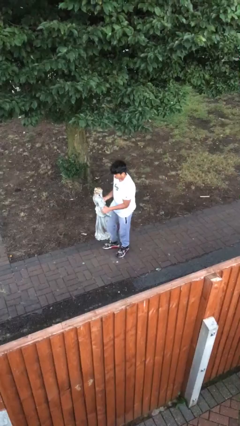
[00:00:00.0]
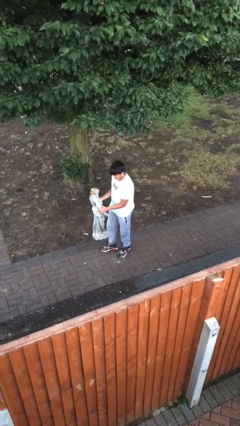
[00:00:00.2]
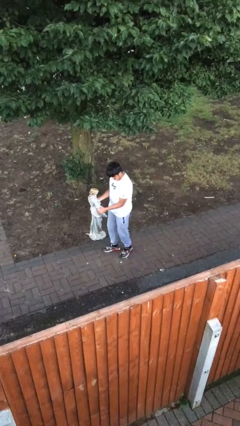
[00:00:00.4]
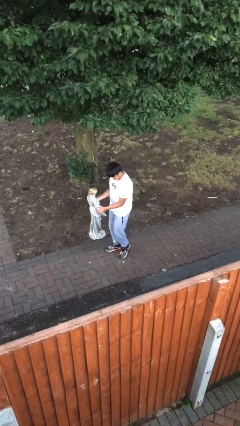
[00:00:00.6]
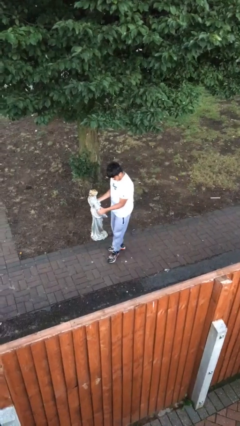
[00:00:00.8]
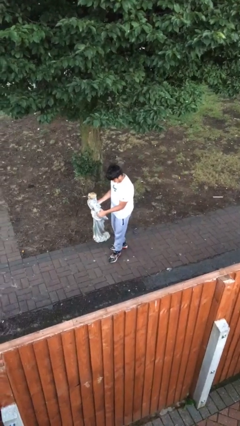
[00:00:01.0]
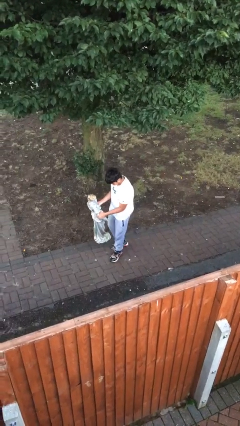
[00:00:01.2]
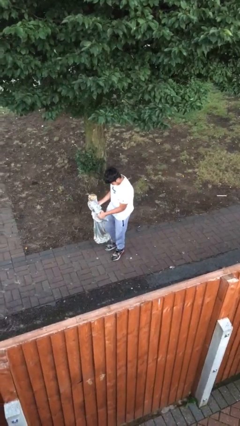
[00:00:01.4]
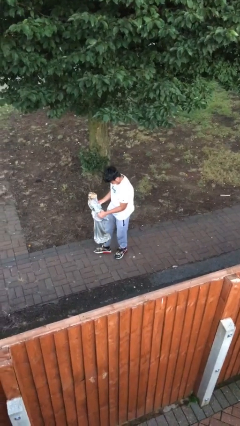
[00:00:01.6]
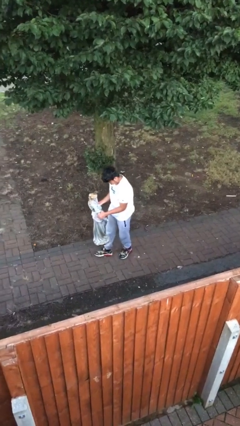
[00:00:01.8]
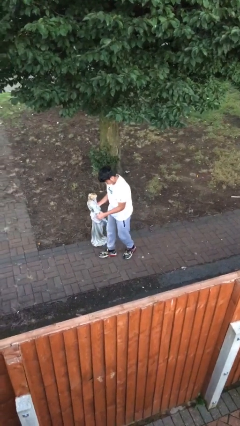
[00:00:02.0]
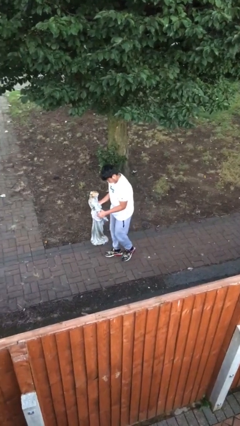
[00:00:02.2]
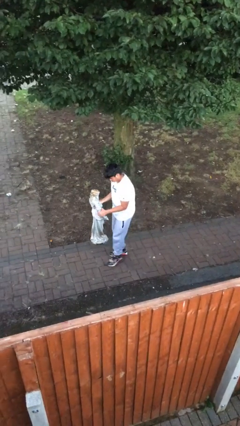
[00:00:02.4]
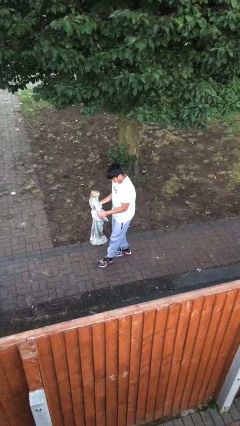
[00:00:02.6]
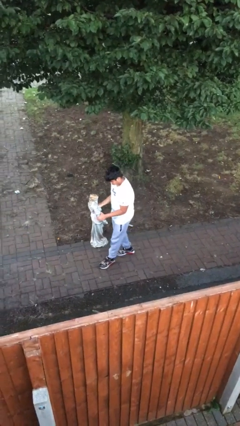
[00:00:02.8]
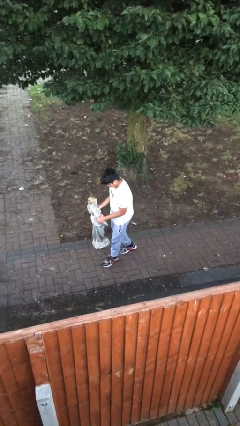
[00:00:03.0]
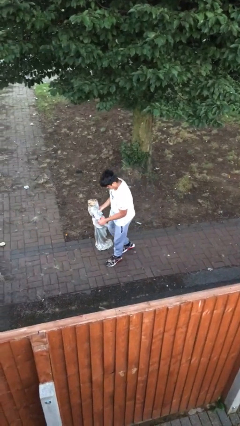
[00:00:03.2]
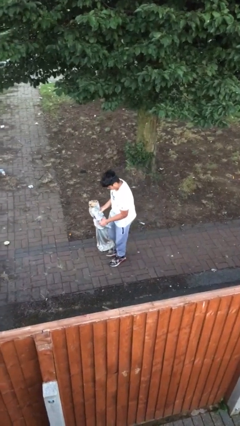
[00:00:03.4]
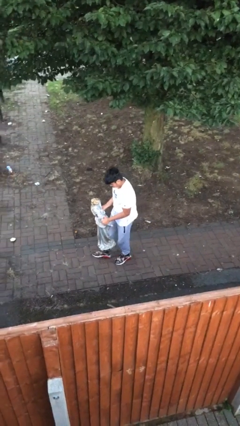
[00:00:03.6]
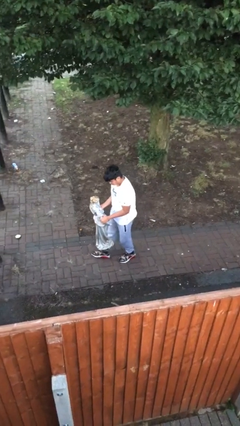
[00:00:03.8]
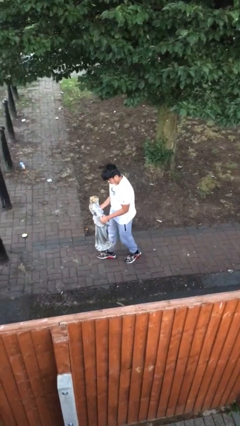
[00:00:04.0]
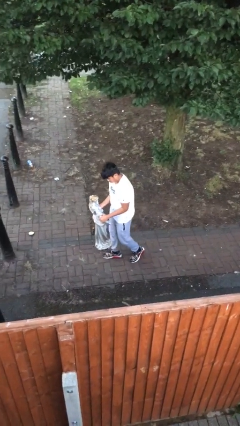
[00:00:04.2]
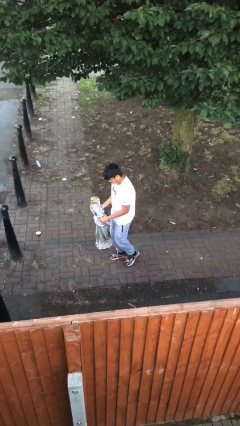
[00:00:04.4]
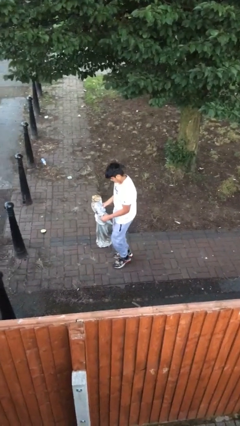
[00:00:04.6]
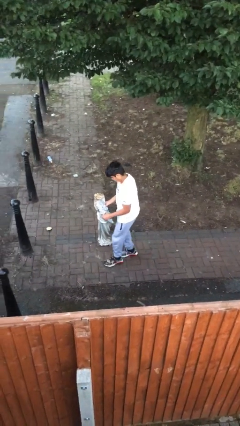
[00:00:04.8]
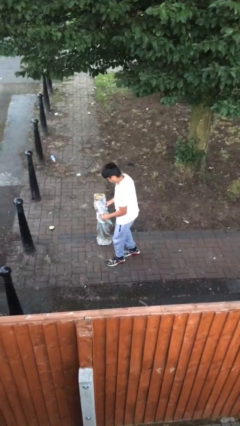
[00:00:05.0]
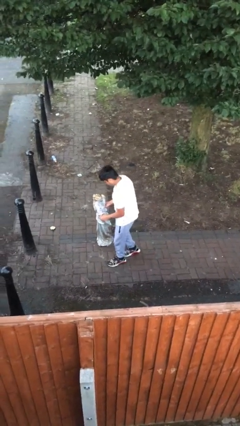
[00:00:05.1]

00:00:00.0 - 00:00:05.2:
person carries heavy object

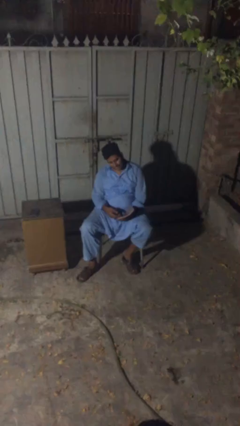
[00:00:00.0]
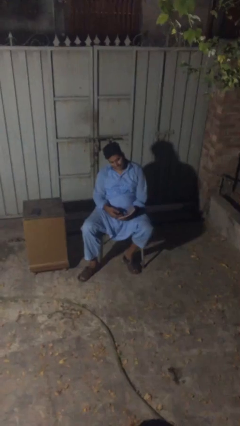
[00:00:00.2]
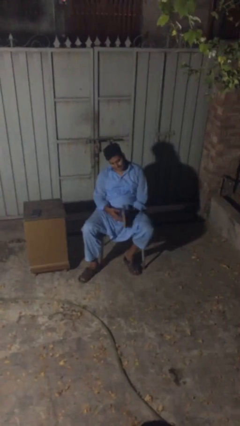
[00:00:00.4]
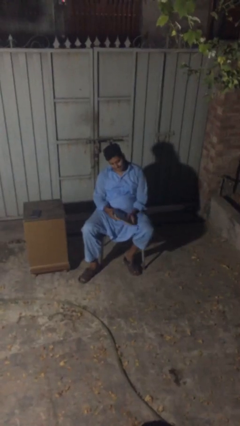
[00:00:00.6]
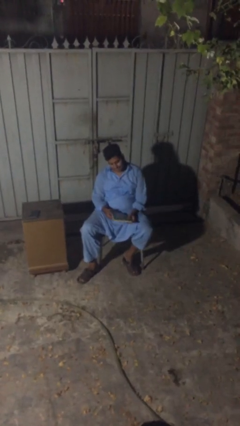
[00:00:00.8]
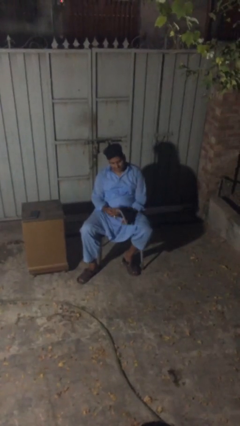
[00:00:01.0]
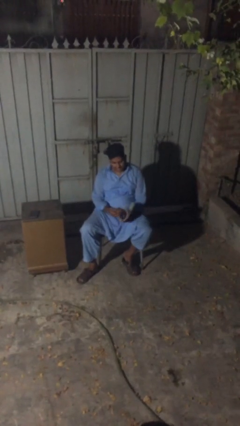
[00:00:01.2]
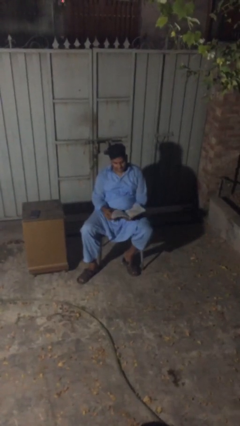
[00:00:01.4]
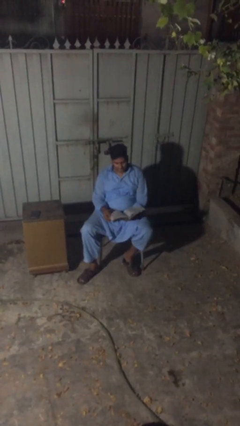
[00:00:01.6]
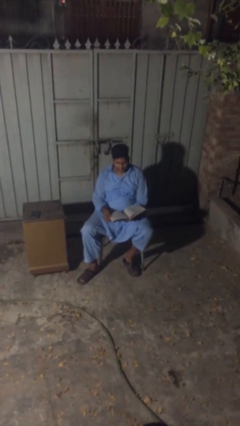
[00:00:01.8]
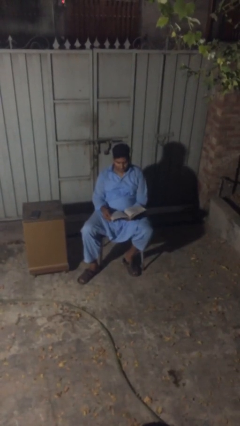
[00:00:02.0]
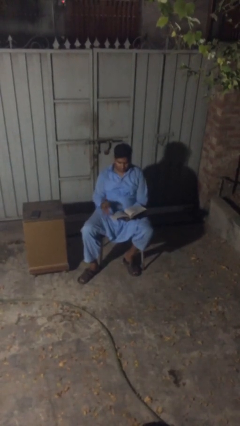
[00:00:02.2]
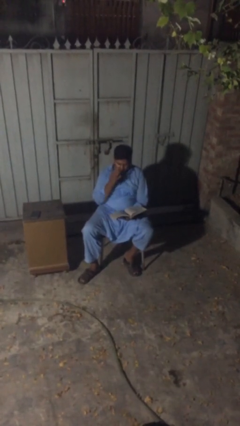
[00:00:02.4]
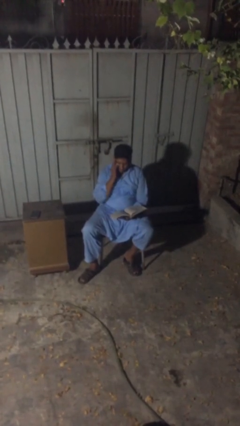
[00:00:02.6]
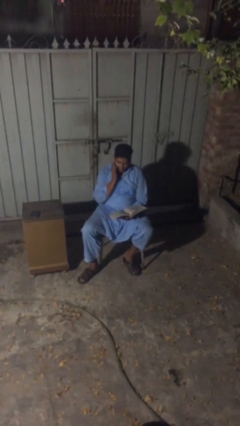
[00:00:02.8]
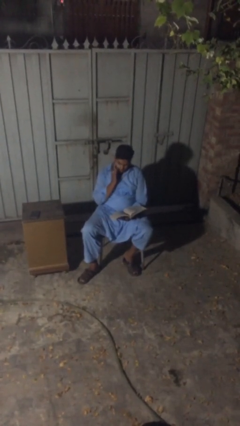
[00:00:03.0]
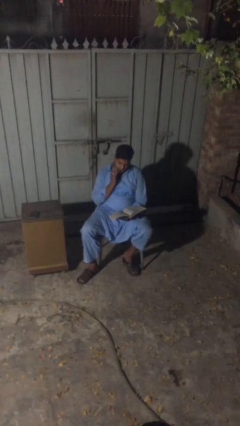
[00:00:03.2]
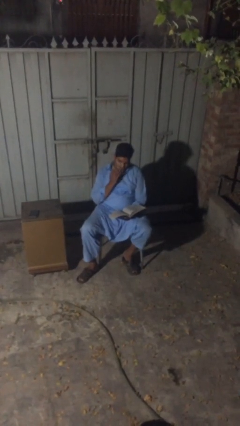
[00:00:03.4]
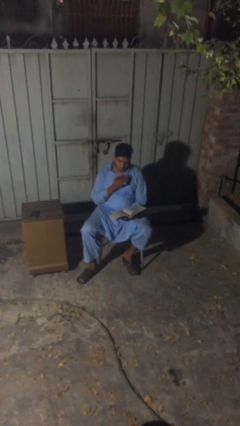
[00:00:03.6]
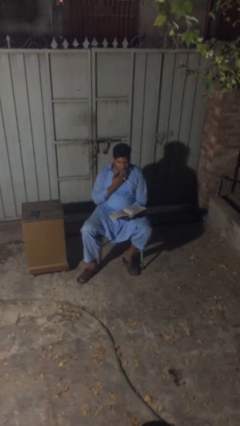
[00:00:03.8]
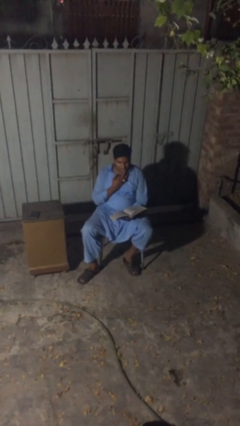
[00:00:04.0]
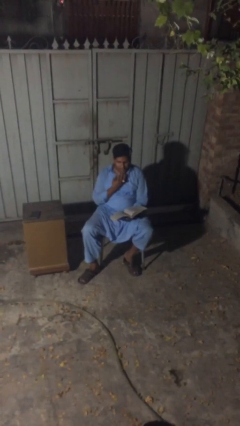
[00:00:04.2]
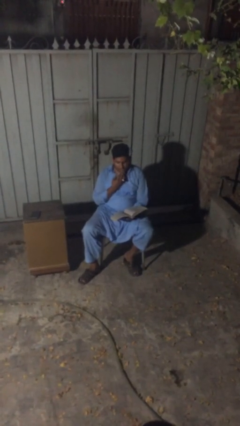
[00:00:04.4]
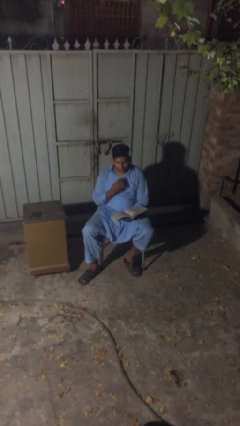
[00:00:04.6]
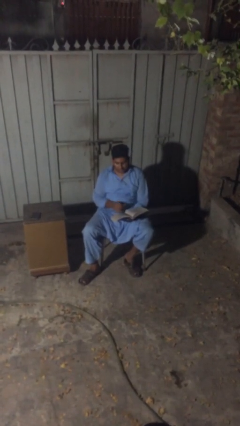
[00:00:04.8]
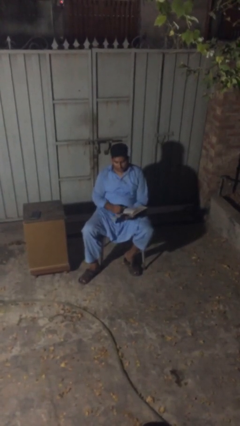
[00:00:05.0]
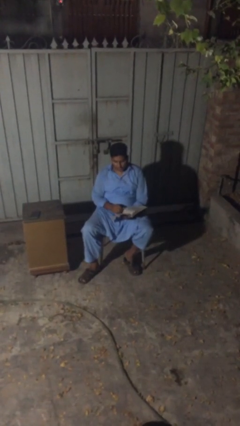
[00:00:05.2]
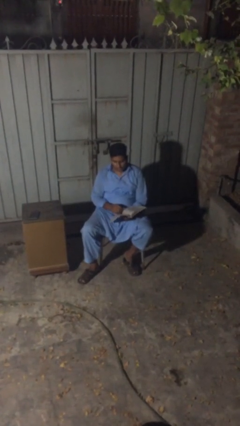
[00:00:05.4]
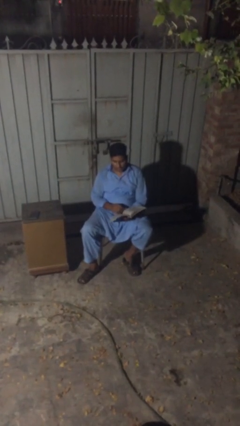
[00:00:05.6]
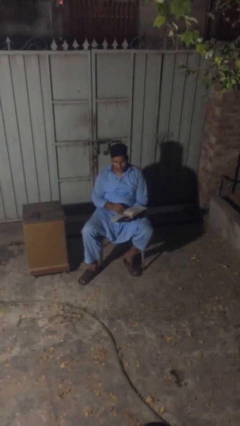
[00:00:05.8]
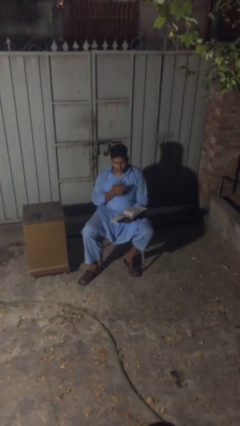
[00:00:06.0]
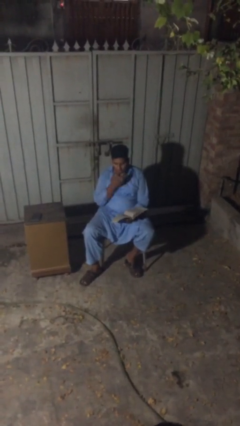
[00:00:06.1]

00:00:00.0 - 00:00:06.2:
person reads document

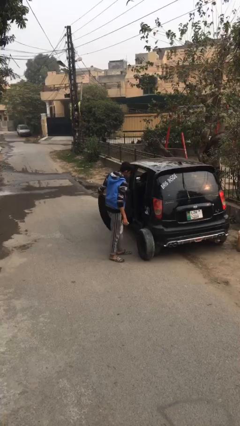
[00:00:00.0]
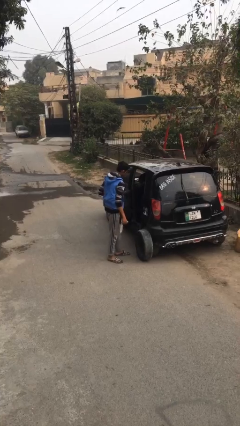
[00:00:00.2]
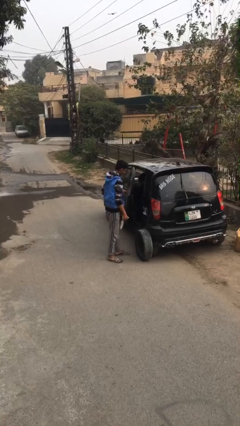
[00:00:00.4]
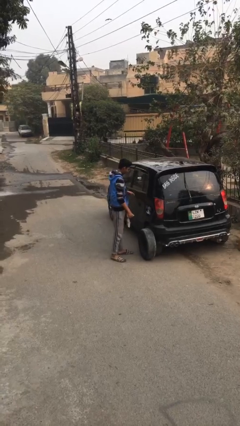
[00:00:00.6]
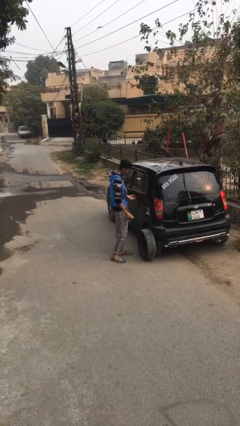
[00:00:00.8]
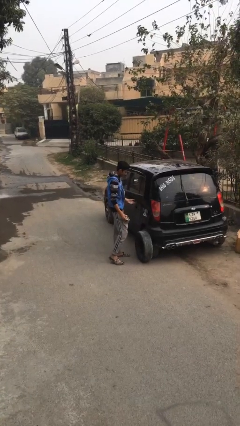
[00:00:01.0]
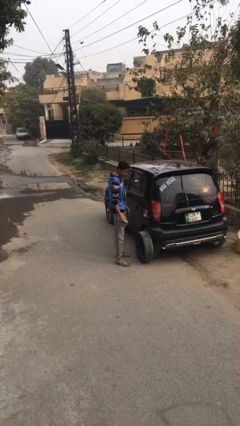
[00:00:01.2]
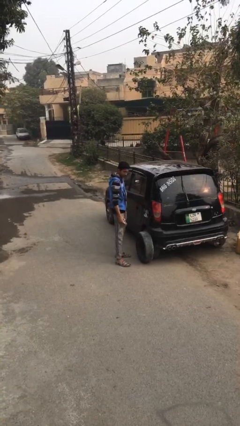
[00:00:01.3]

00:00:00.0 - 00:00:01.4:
person closes car door

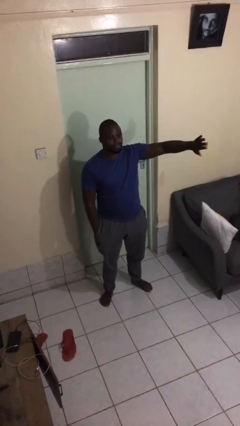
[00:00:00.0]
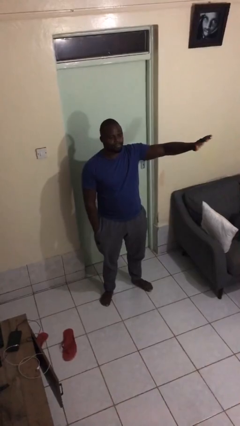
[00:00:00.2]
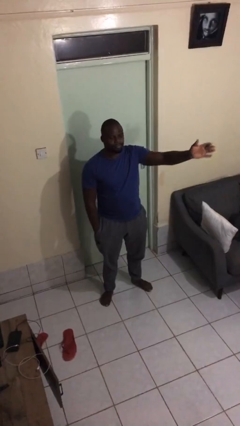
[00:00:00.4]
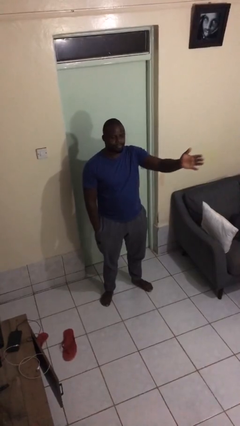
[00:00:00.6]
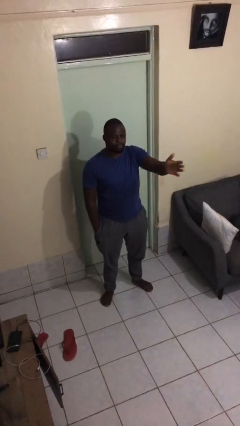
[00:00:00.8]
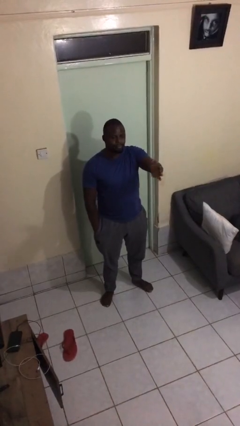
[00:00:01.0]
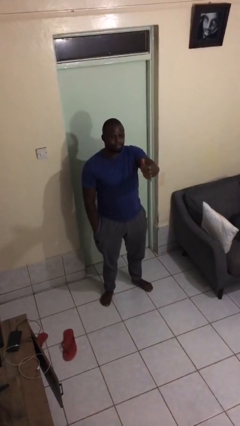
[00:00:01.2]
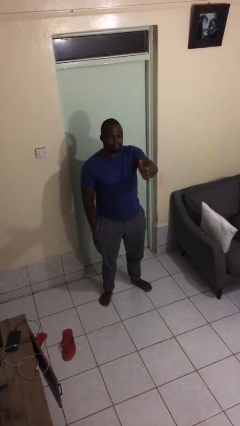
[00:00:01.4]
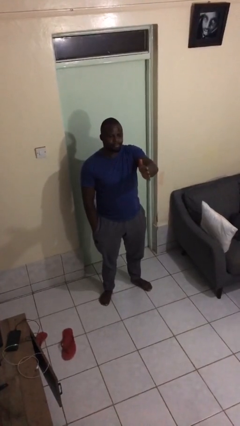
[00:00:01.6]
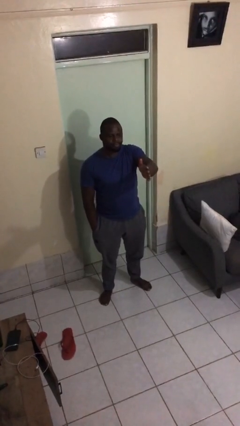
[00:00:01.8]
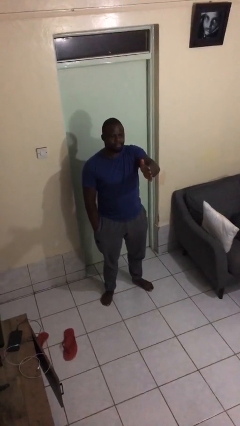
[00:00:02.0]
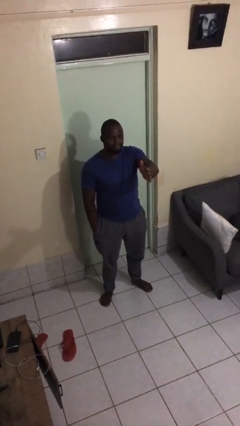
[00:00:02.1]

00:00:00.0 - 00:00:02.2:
person gestures swipe right

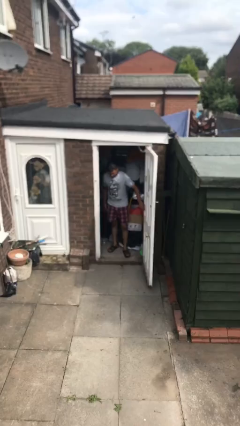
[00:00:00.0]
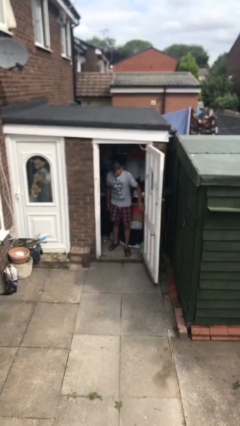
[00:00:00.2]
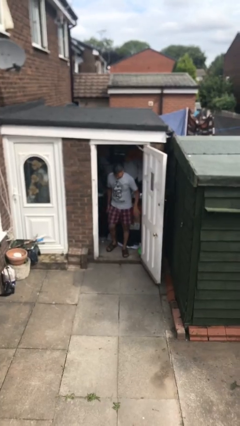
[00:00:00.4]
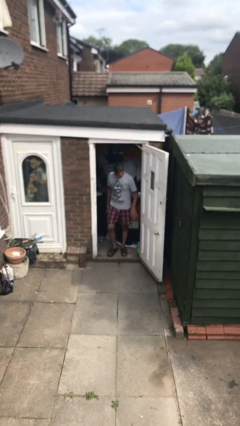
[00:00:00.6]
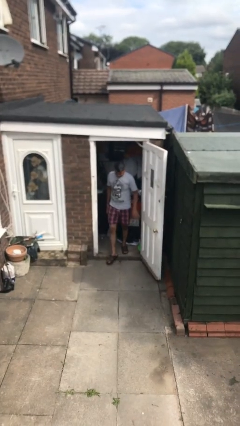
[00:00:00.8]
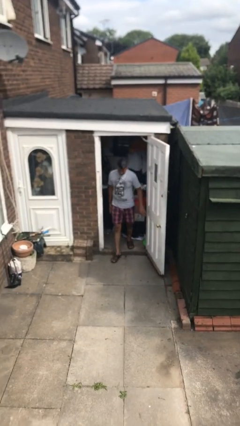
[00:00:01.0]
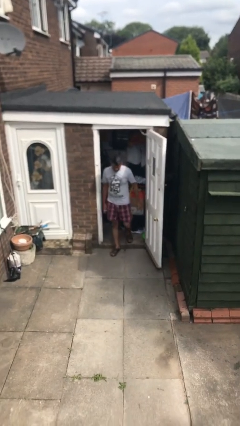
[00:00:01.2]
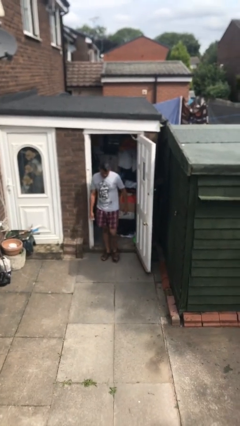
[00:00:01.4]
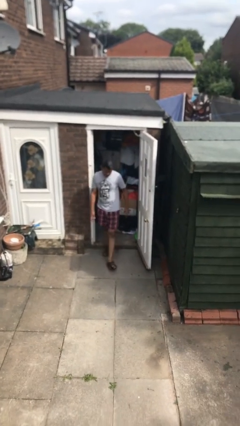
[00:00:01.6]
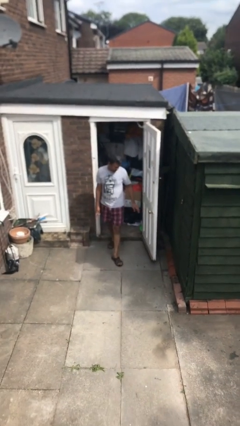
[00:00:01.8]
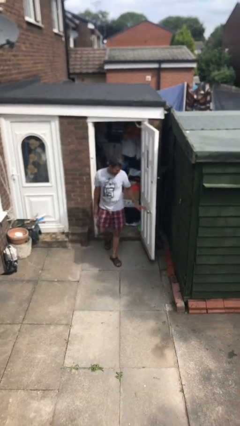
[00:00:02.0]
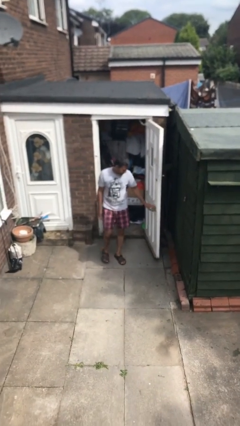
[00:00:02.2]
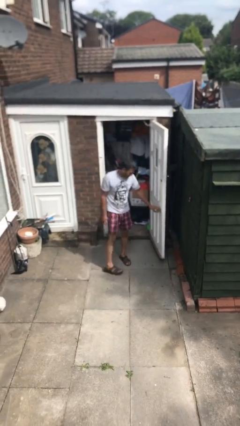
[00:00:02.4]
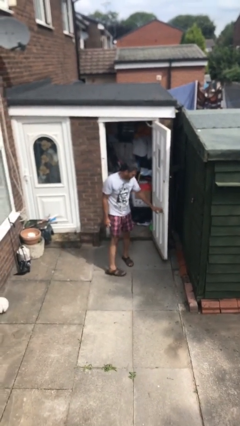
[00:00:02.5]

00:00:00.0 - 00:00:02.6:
person enters scene through structure
